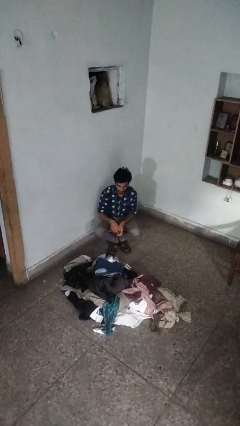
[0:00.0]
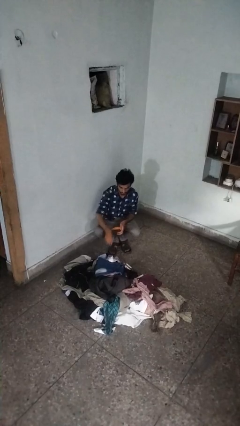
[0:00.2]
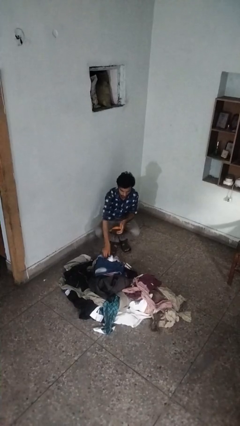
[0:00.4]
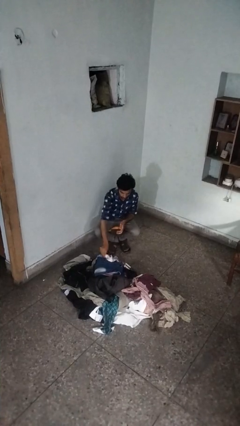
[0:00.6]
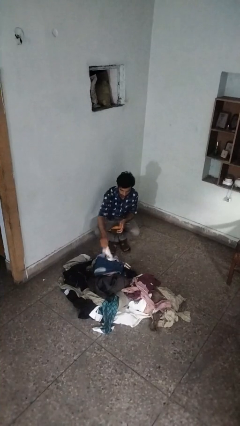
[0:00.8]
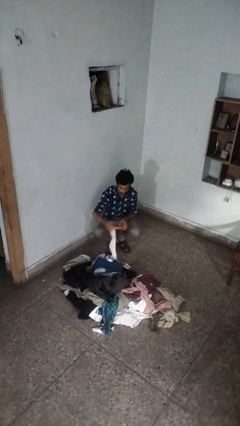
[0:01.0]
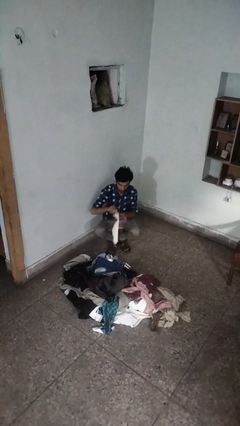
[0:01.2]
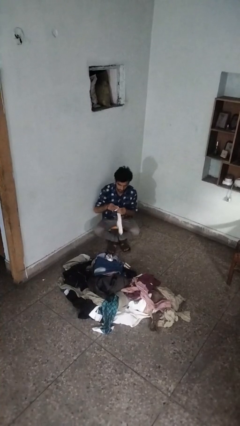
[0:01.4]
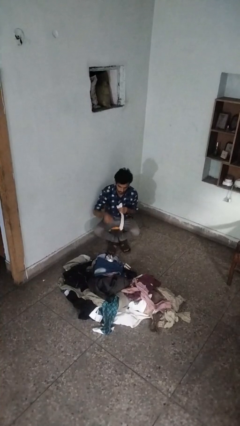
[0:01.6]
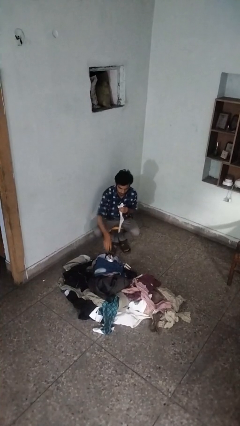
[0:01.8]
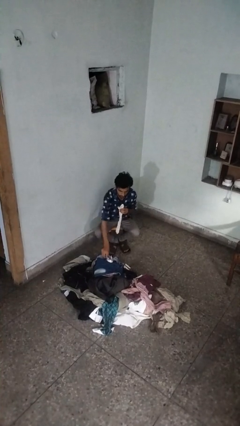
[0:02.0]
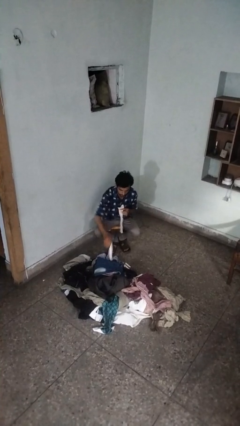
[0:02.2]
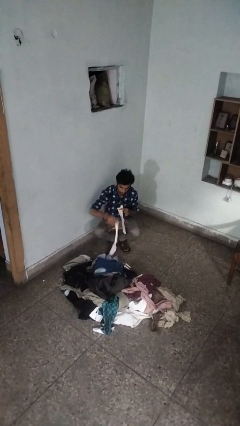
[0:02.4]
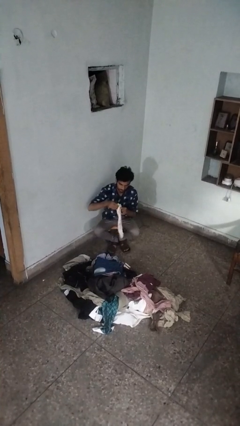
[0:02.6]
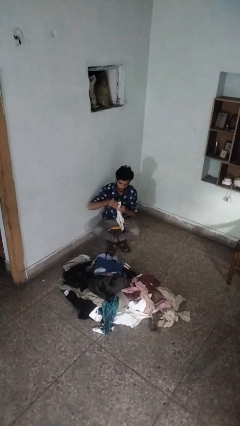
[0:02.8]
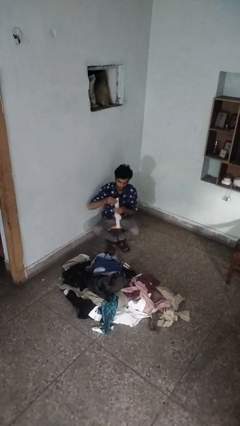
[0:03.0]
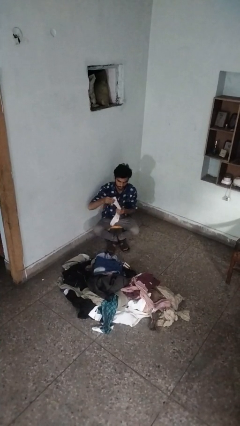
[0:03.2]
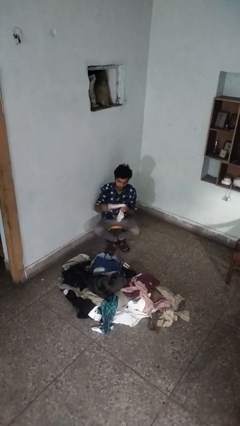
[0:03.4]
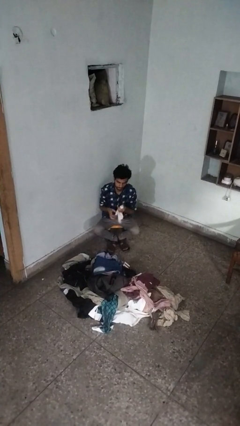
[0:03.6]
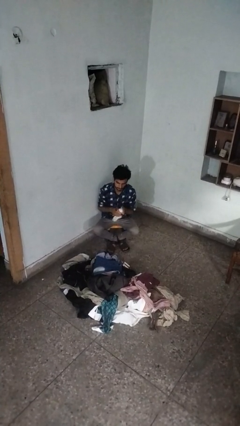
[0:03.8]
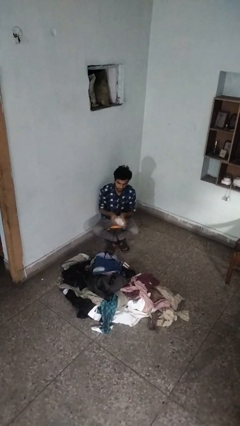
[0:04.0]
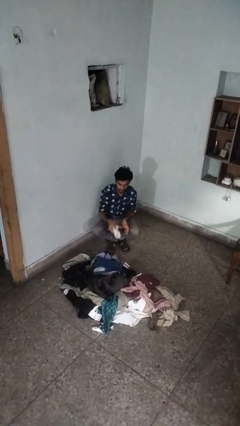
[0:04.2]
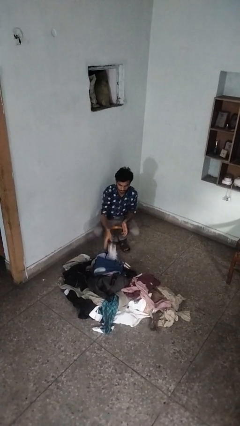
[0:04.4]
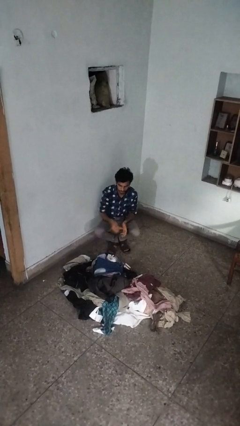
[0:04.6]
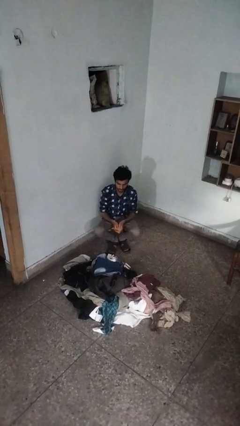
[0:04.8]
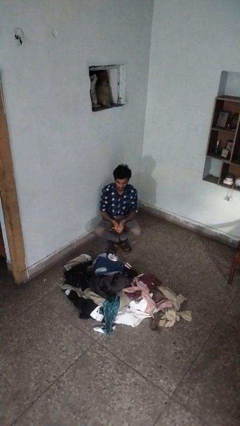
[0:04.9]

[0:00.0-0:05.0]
person folds socks

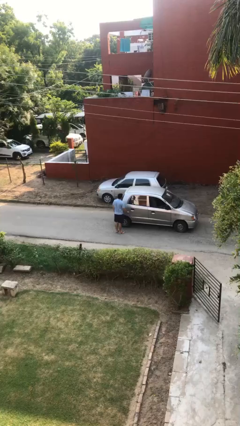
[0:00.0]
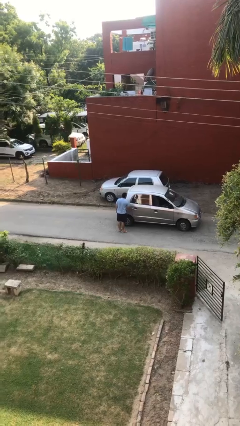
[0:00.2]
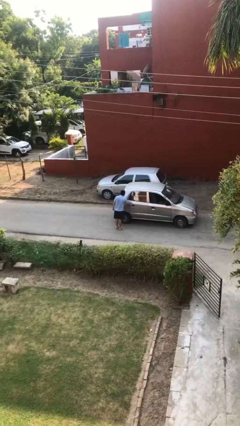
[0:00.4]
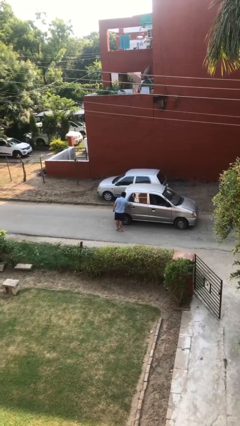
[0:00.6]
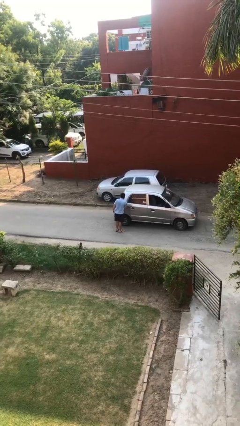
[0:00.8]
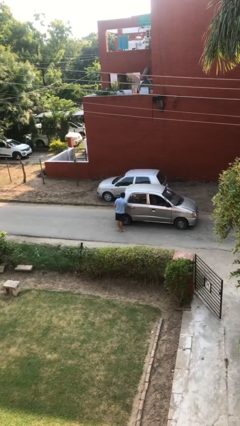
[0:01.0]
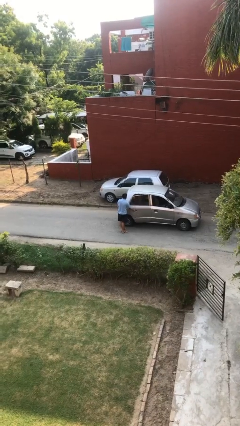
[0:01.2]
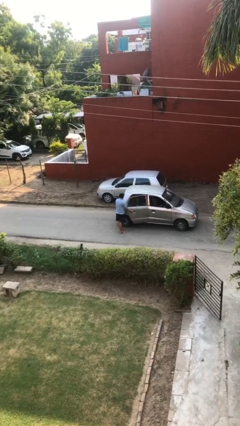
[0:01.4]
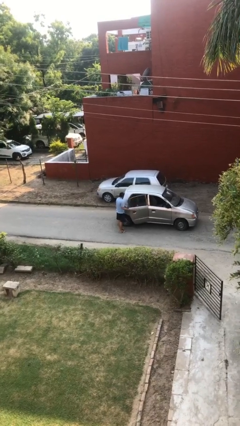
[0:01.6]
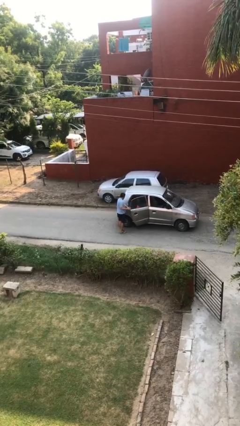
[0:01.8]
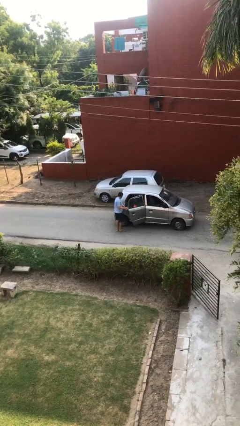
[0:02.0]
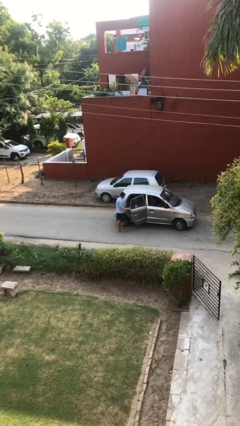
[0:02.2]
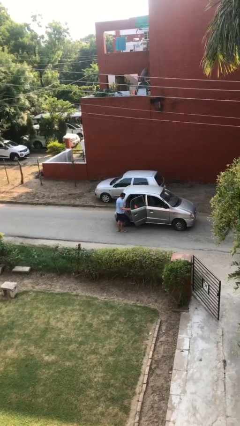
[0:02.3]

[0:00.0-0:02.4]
person opens car door

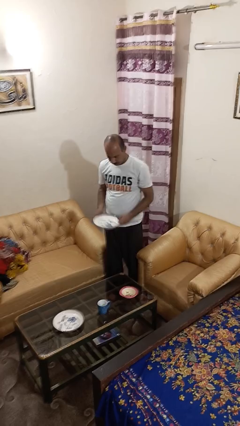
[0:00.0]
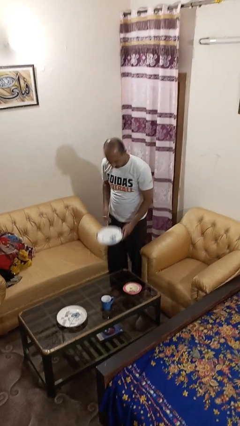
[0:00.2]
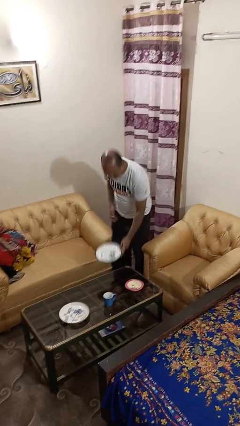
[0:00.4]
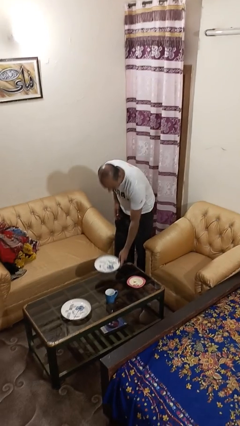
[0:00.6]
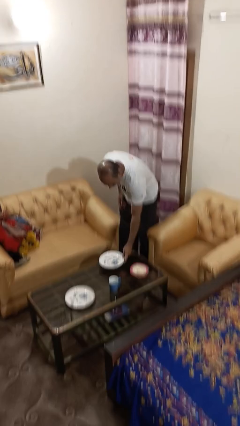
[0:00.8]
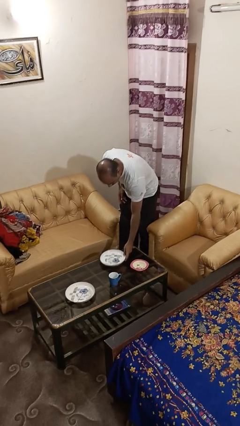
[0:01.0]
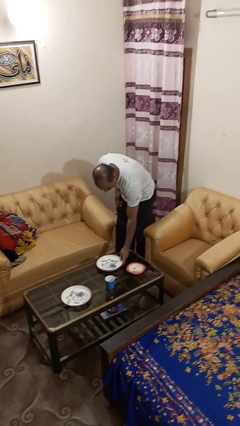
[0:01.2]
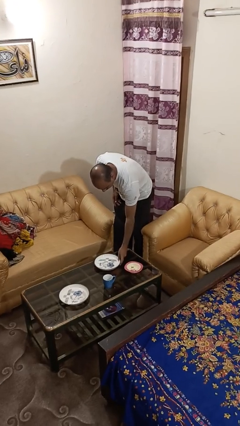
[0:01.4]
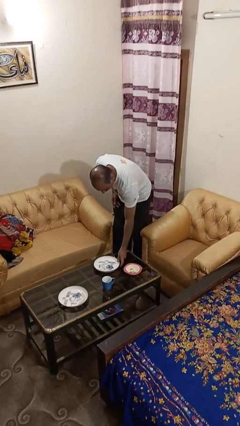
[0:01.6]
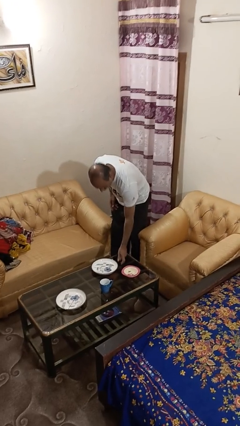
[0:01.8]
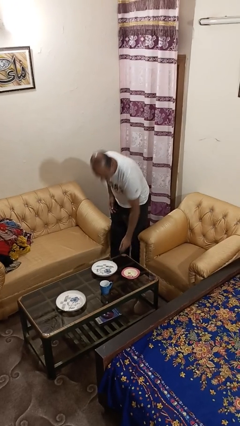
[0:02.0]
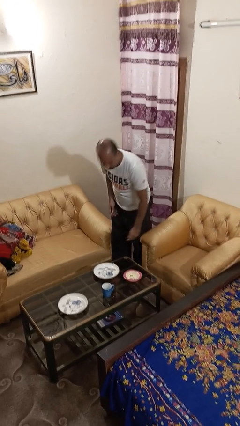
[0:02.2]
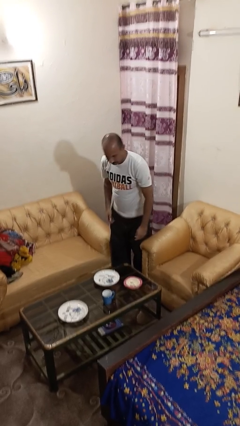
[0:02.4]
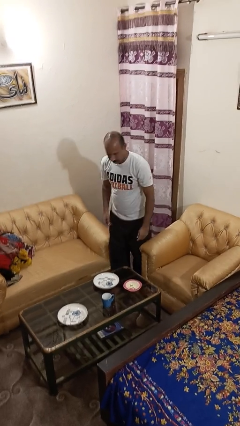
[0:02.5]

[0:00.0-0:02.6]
person sets table

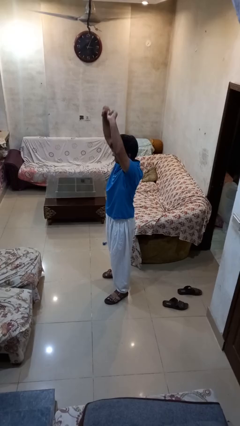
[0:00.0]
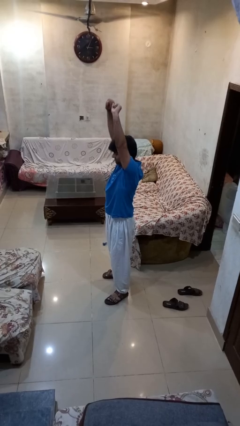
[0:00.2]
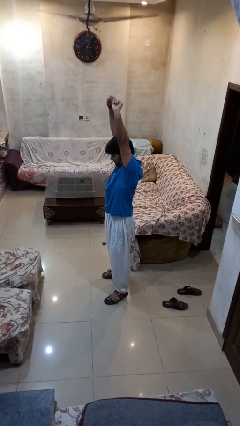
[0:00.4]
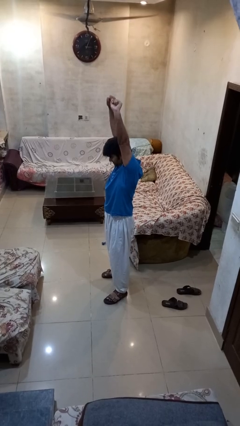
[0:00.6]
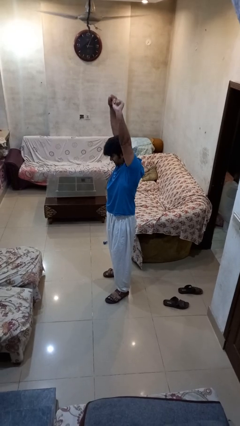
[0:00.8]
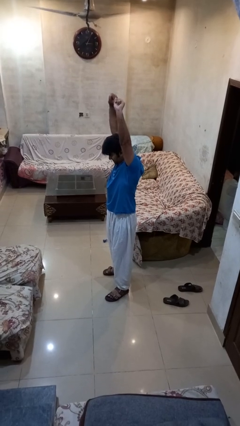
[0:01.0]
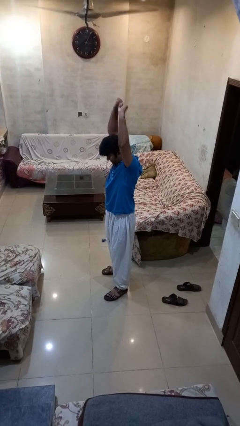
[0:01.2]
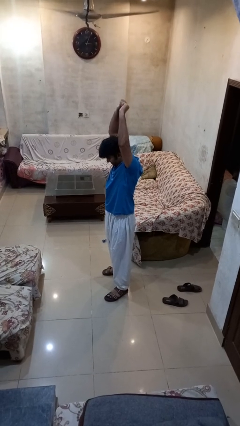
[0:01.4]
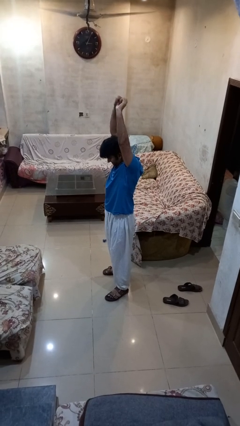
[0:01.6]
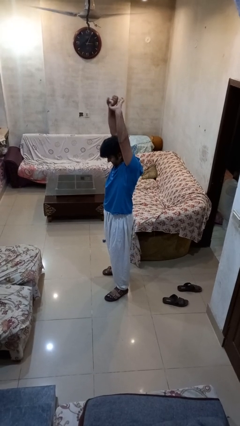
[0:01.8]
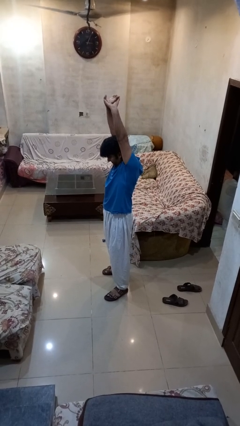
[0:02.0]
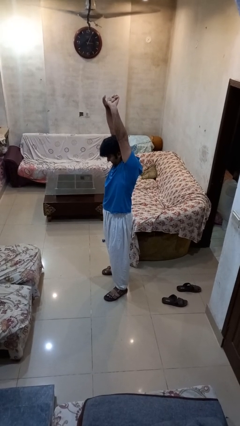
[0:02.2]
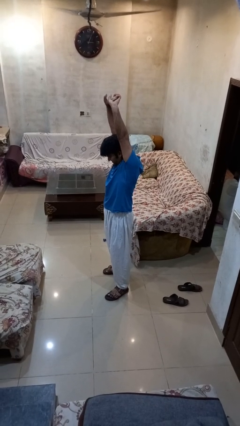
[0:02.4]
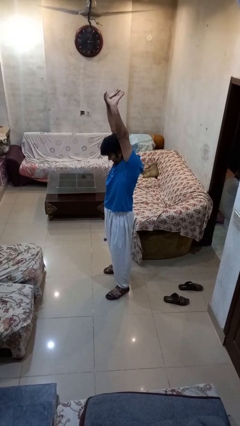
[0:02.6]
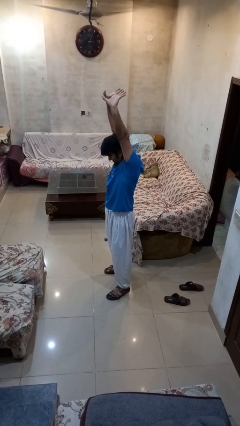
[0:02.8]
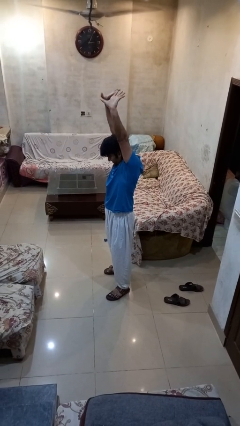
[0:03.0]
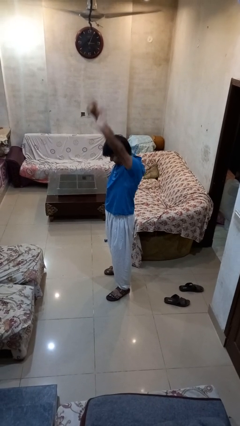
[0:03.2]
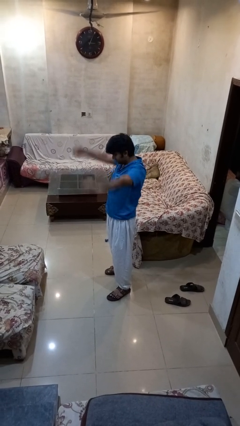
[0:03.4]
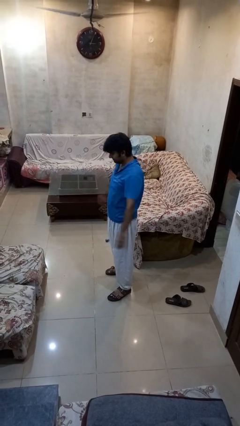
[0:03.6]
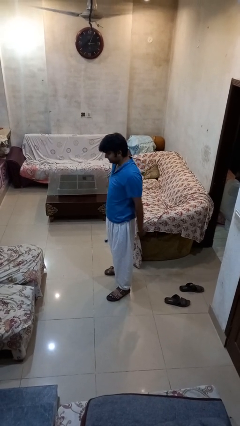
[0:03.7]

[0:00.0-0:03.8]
person stretches arms over head

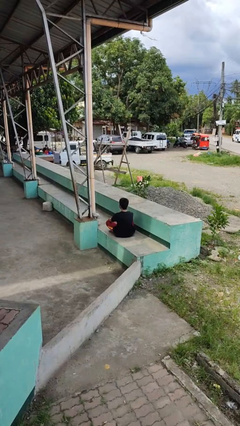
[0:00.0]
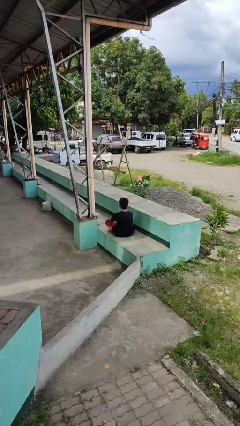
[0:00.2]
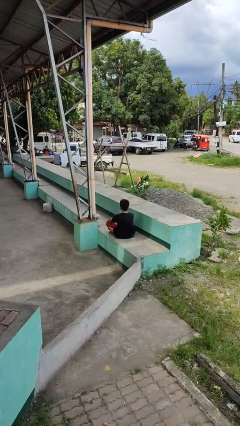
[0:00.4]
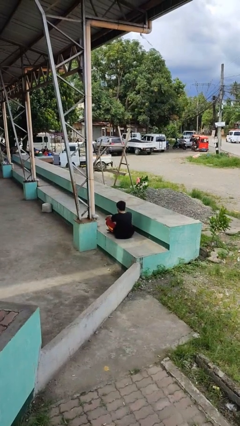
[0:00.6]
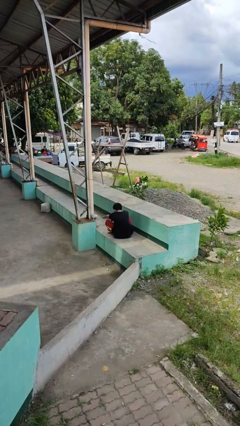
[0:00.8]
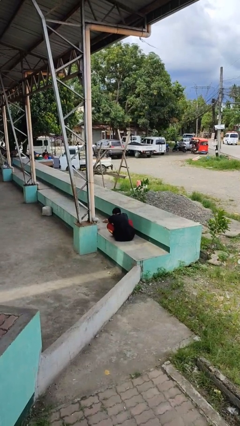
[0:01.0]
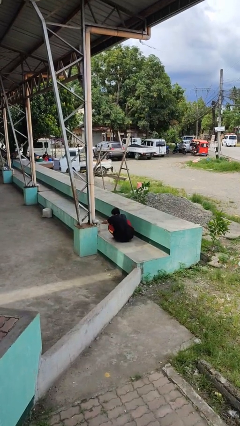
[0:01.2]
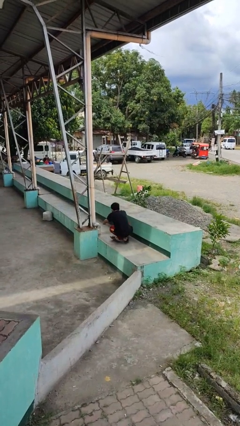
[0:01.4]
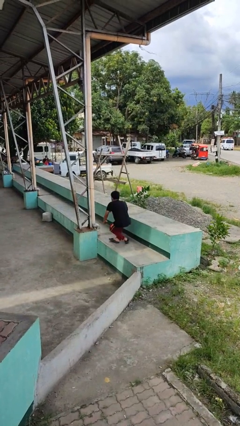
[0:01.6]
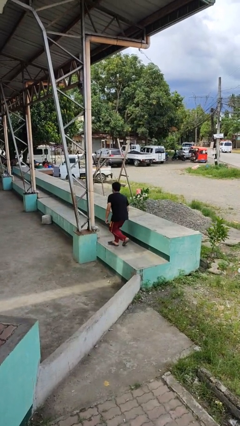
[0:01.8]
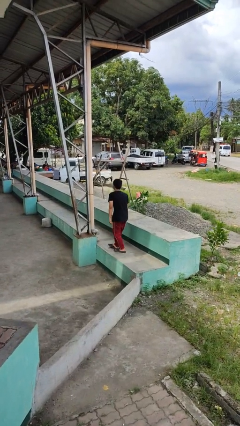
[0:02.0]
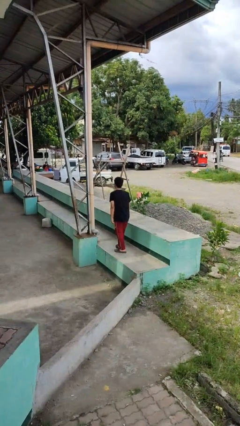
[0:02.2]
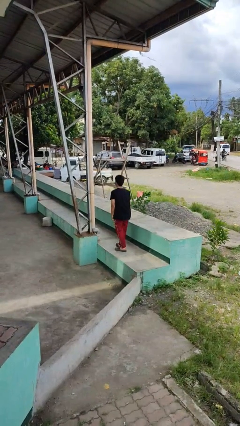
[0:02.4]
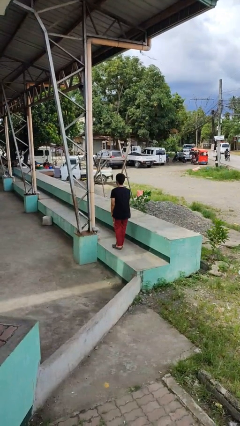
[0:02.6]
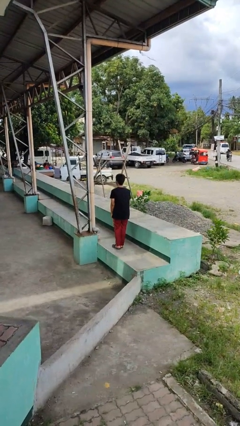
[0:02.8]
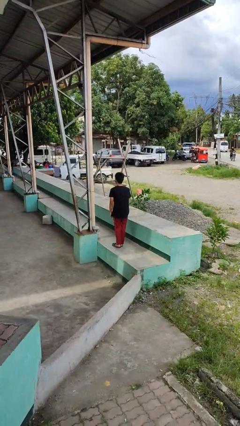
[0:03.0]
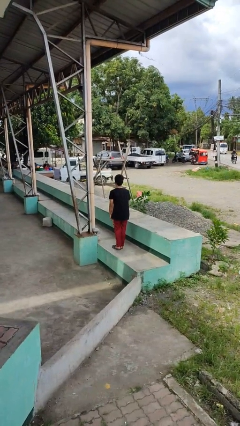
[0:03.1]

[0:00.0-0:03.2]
person stands up from floor

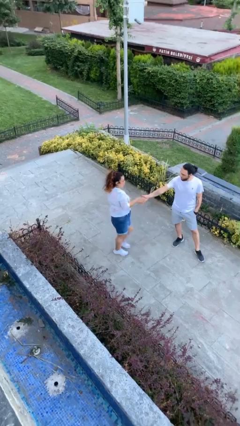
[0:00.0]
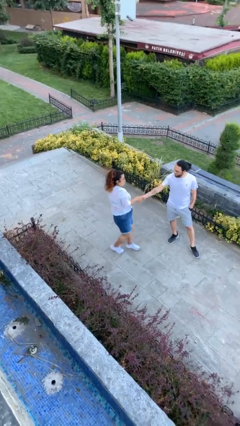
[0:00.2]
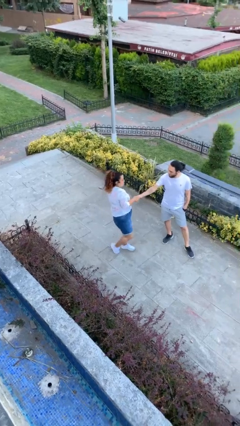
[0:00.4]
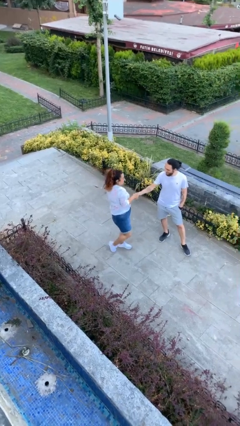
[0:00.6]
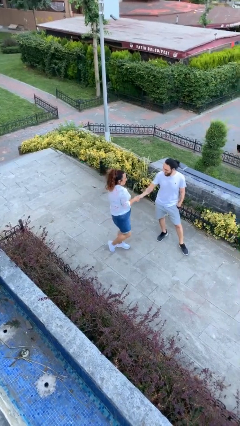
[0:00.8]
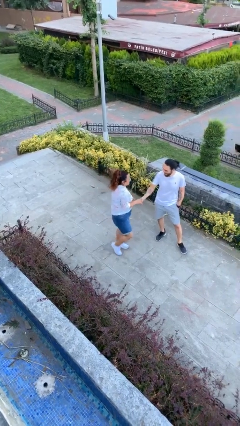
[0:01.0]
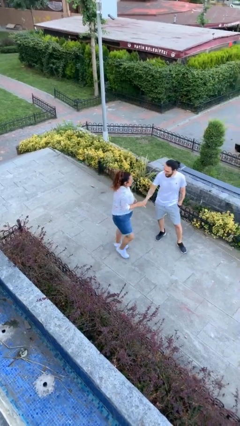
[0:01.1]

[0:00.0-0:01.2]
person shakes hand
